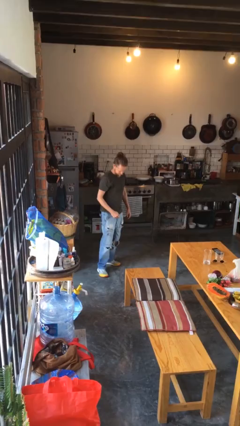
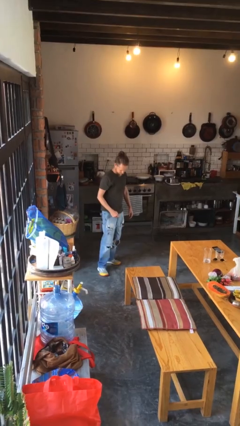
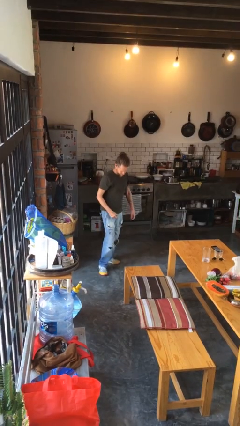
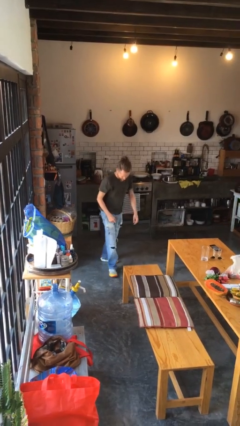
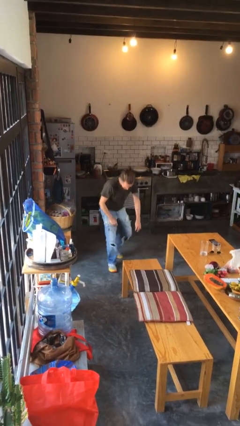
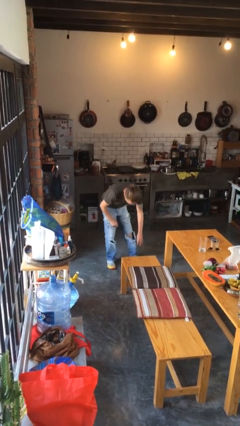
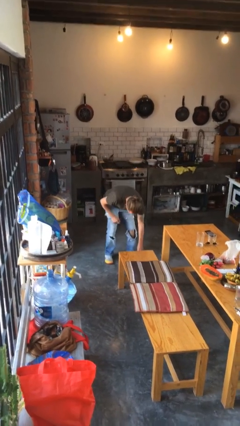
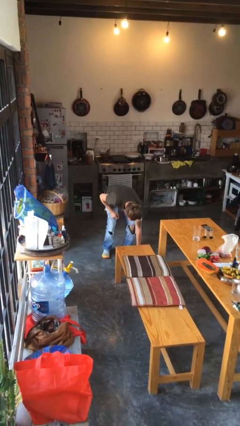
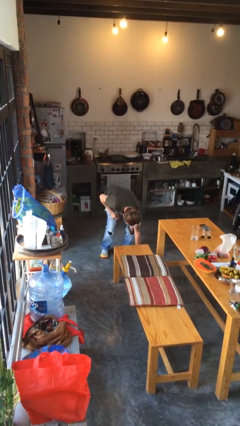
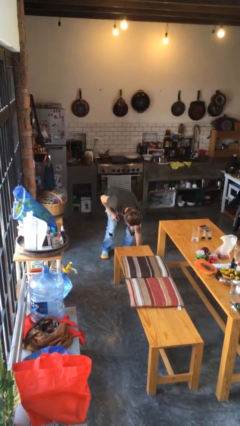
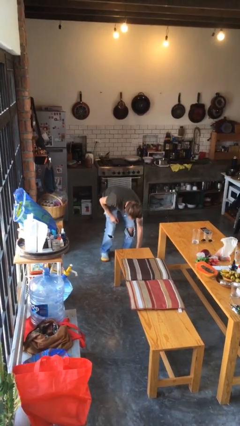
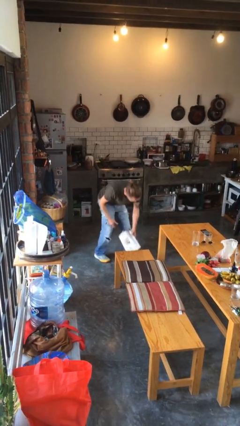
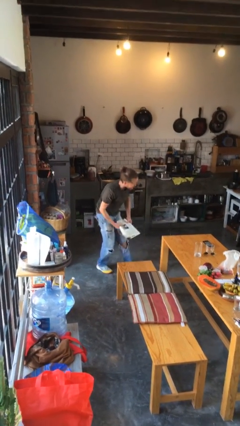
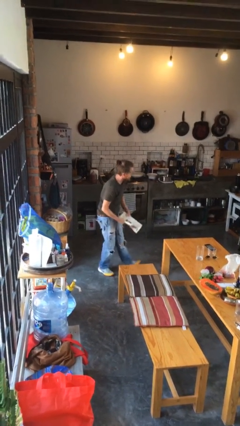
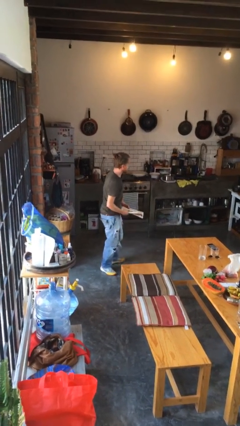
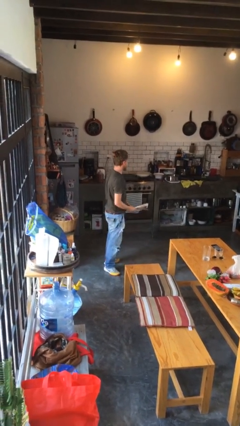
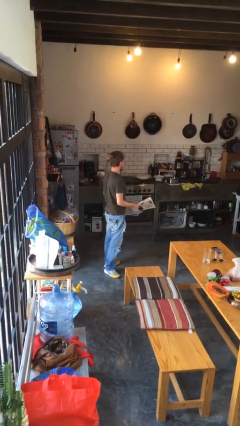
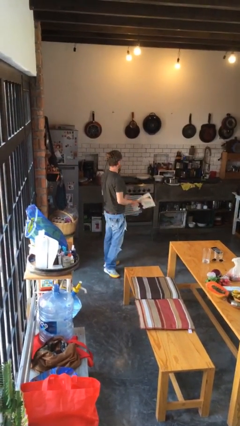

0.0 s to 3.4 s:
person picks up object from floor

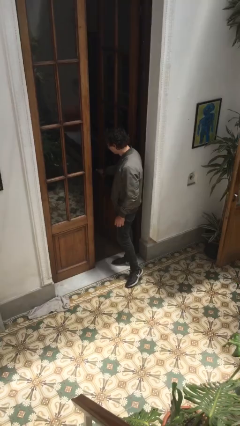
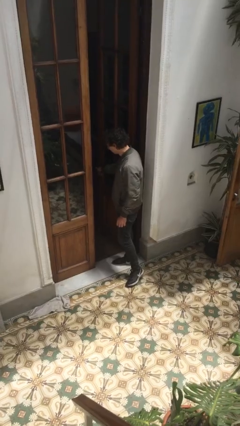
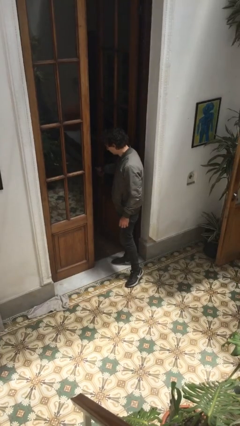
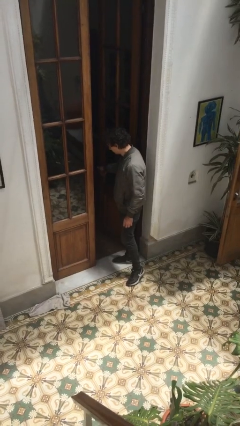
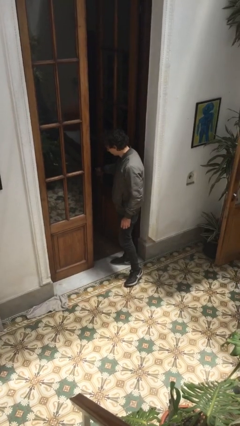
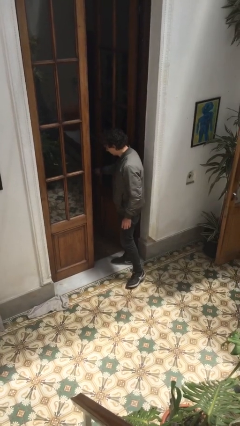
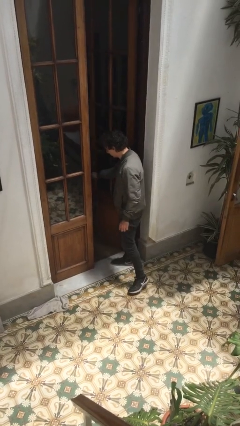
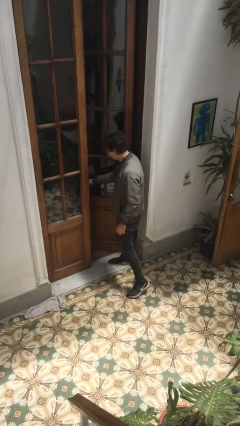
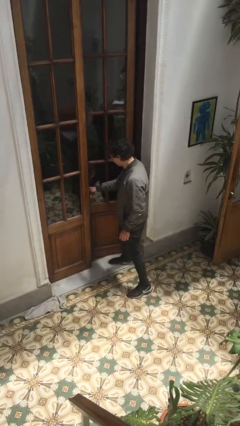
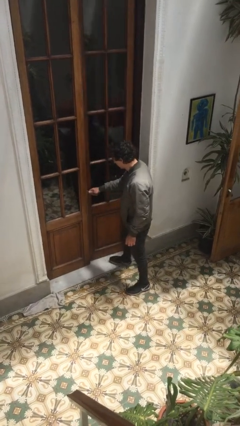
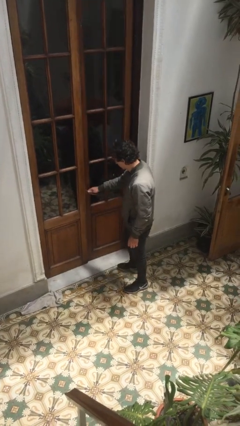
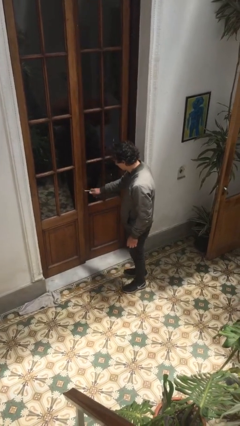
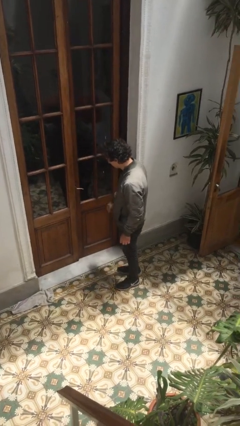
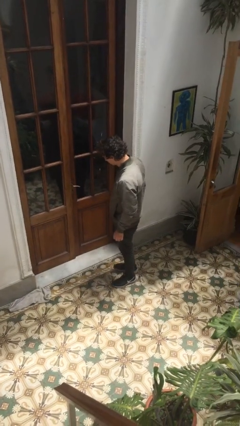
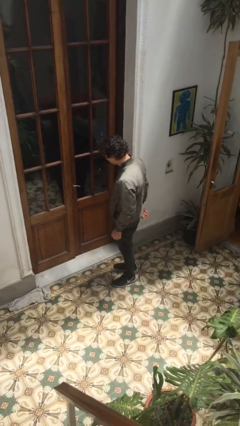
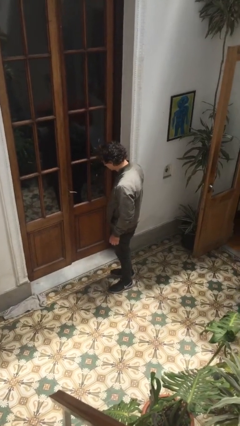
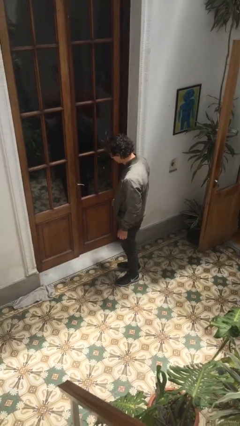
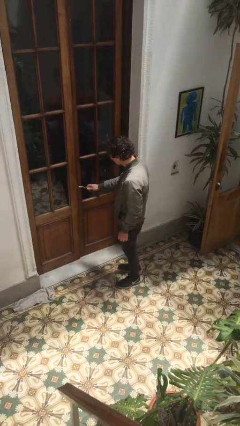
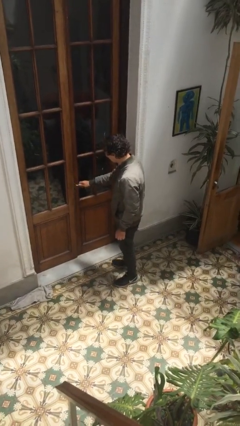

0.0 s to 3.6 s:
person closes facility door

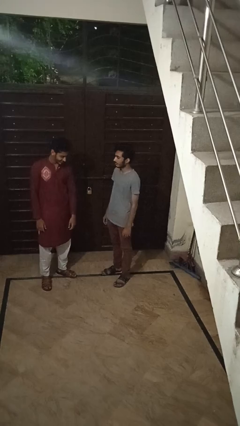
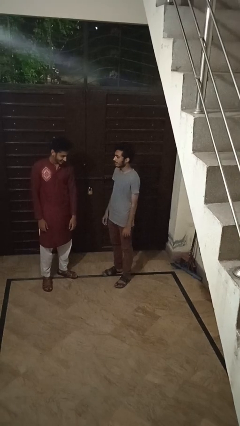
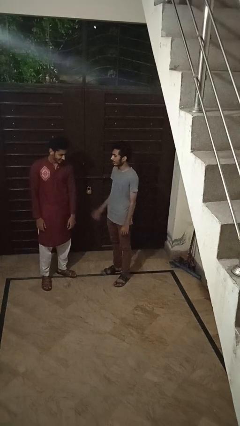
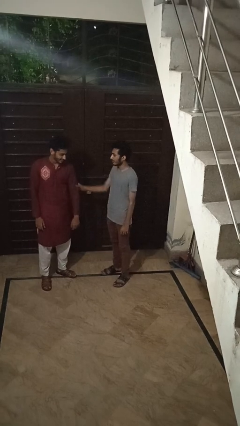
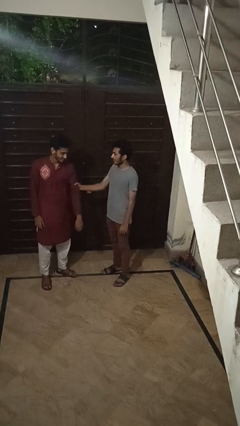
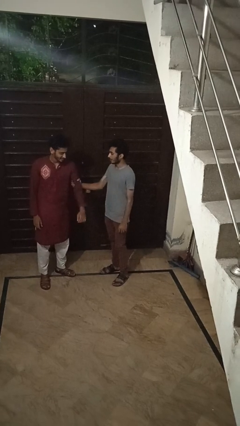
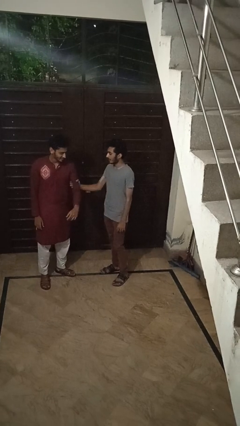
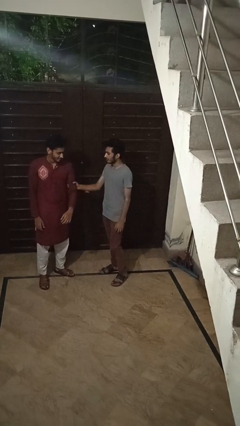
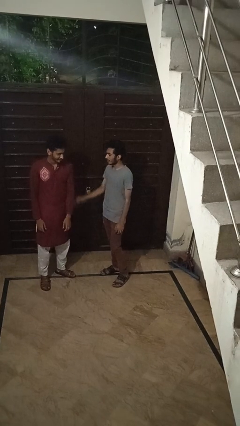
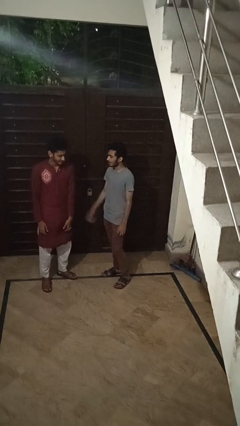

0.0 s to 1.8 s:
person grabs person by bicep

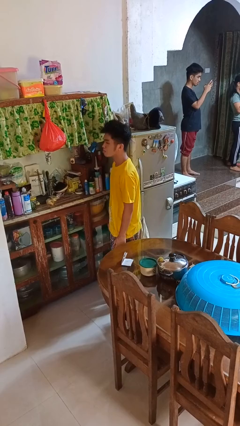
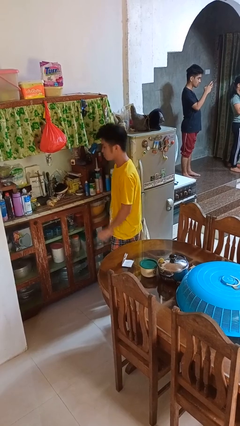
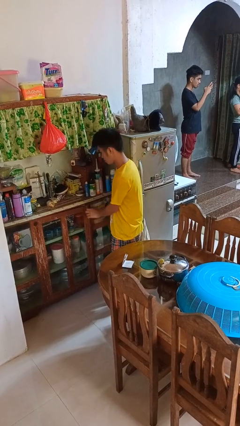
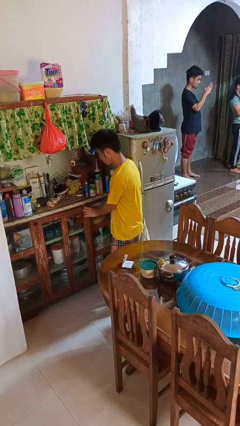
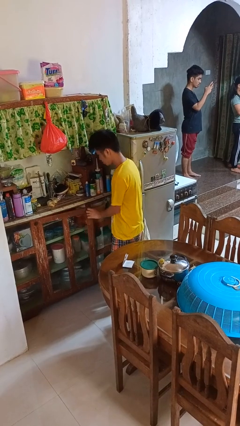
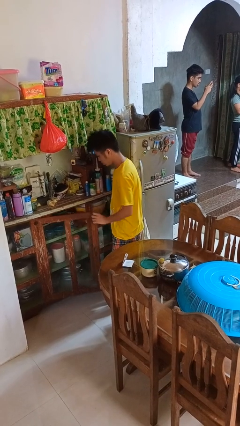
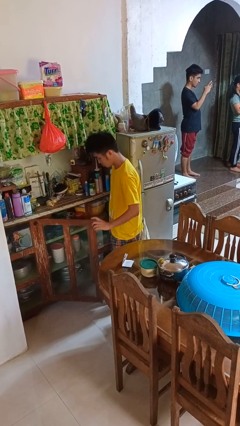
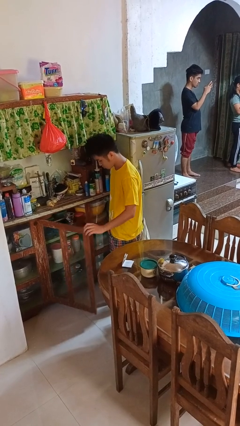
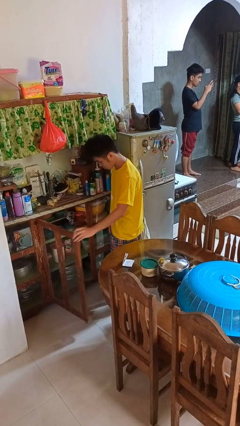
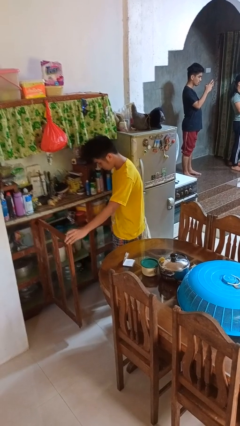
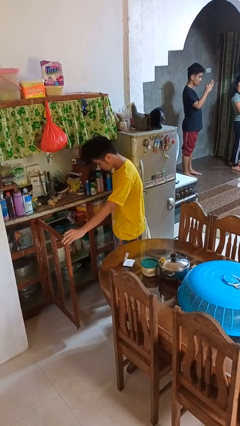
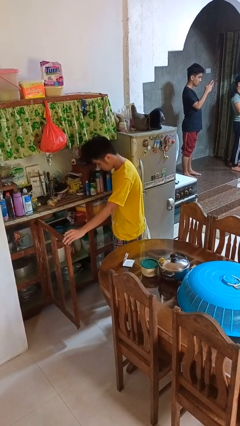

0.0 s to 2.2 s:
person opens cabinet

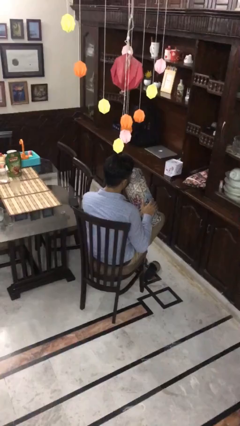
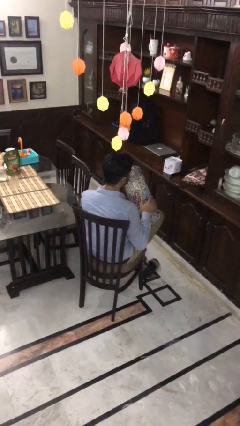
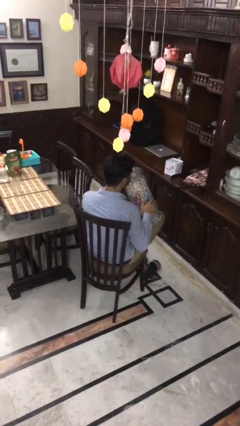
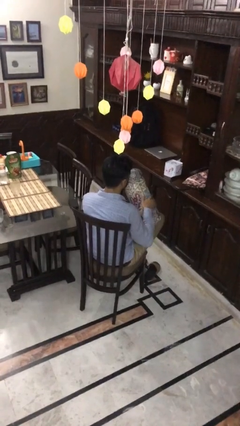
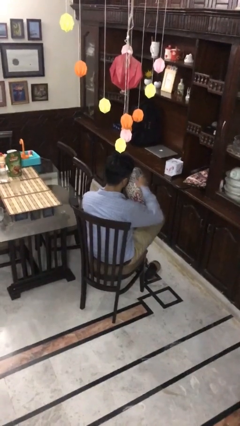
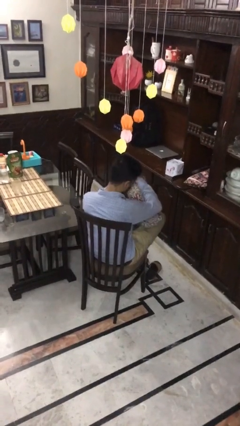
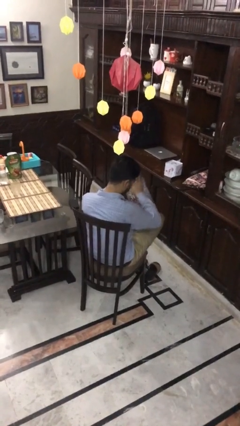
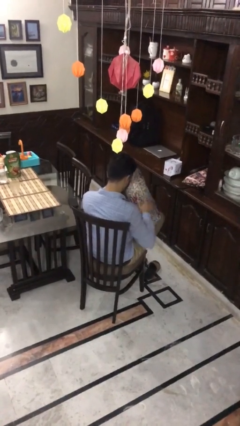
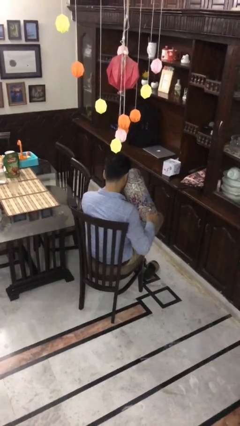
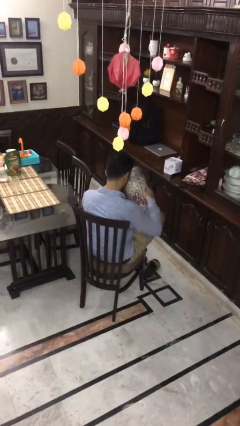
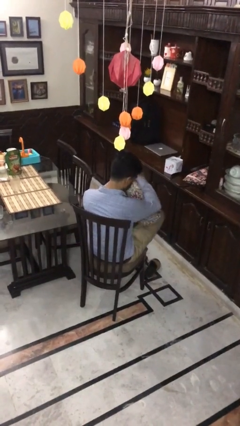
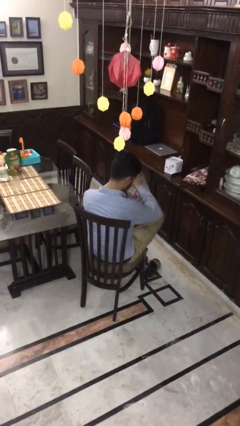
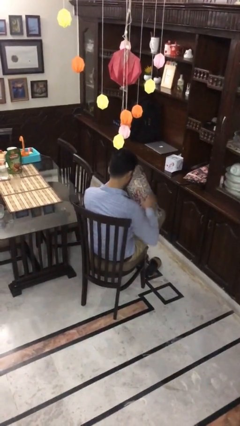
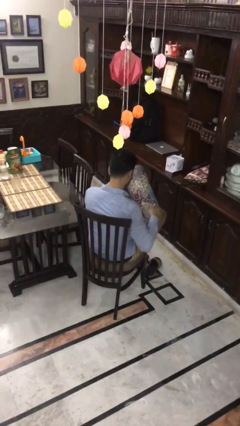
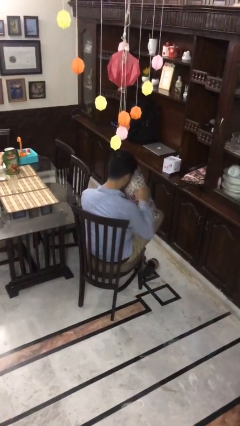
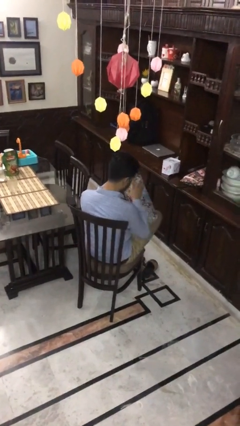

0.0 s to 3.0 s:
person waves hand over object

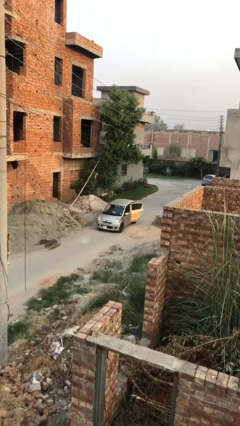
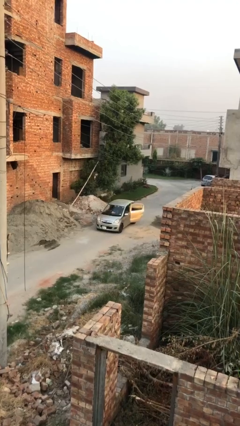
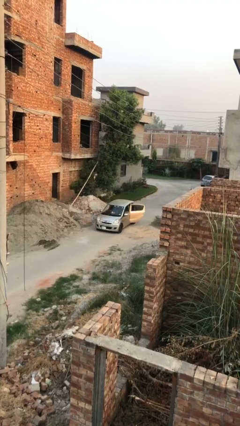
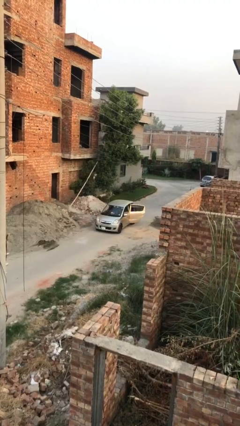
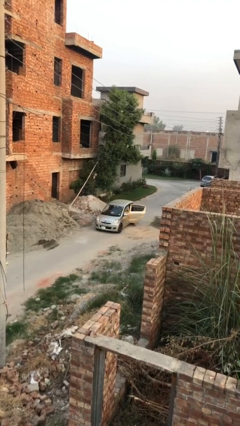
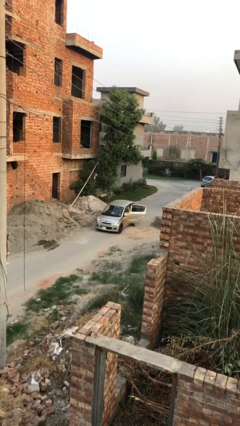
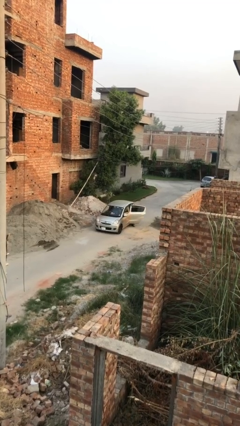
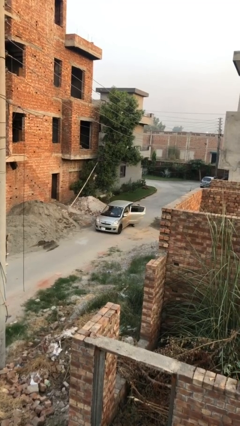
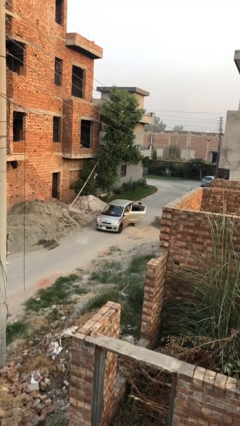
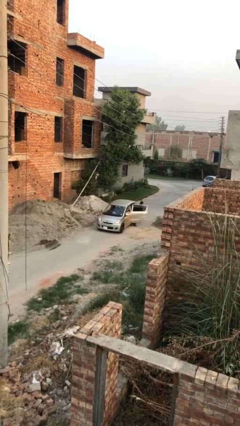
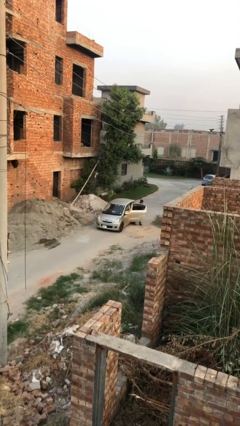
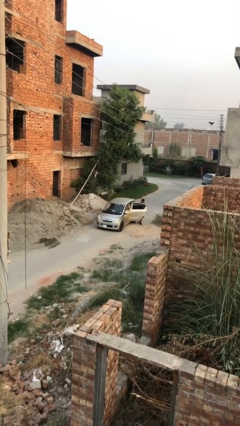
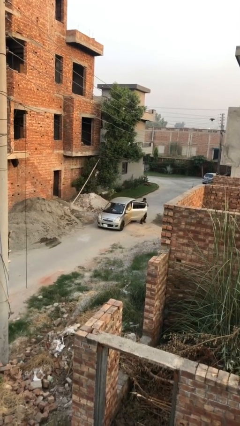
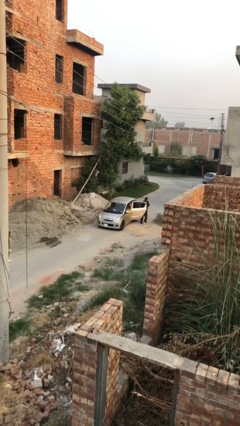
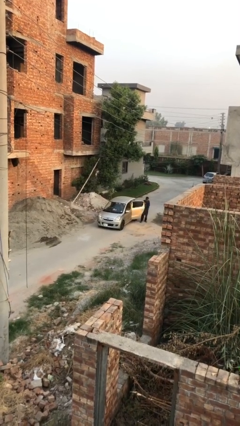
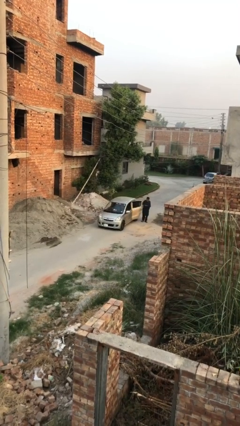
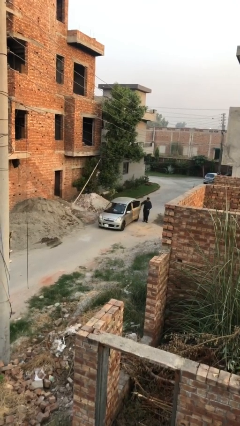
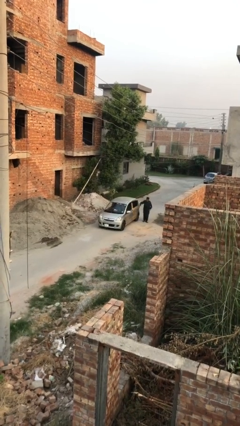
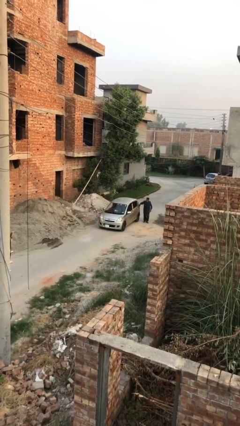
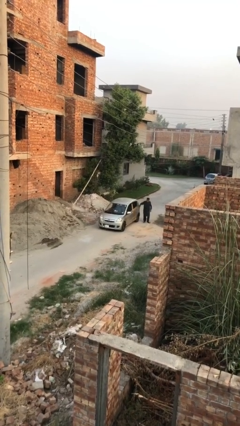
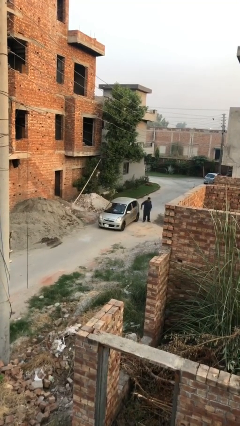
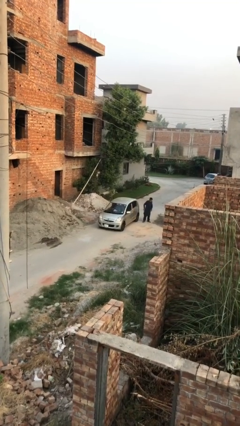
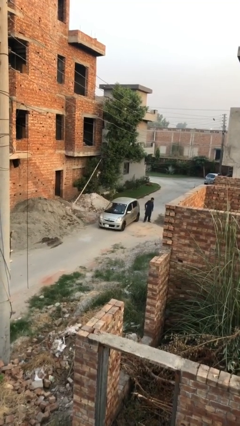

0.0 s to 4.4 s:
car drops off person
